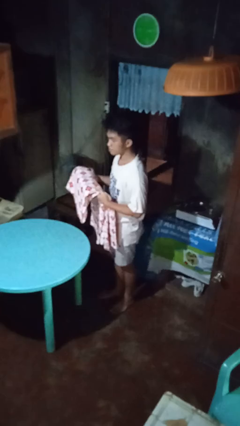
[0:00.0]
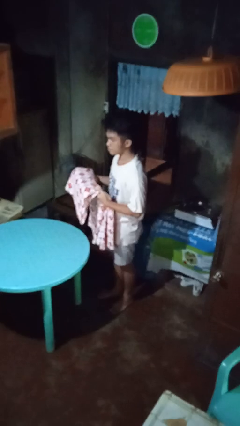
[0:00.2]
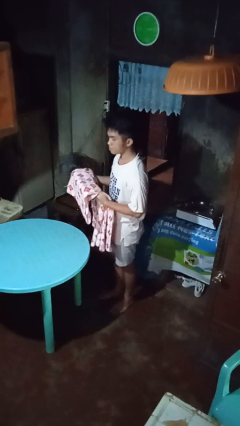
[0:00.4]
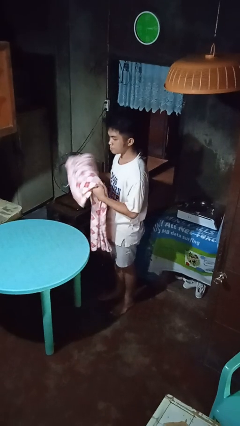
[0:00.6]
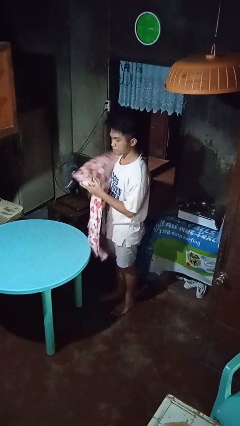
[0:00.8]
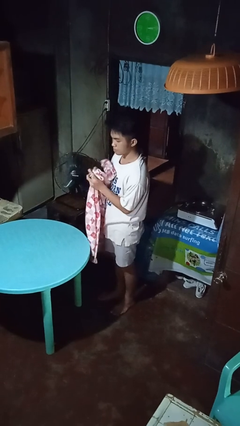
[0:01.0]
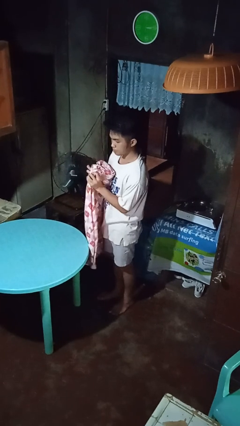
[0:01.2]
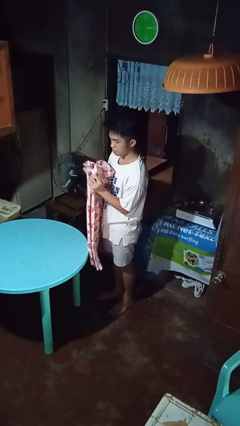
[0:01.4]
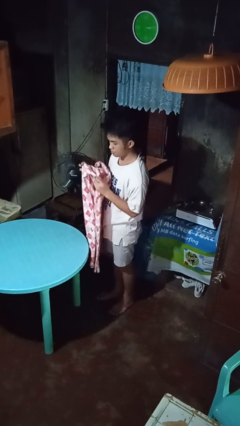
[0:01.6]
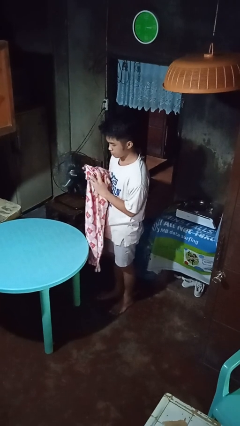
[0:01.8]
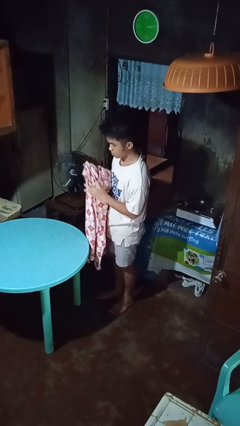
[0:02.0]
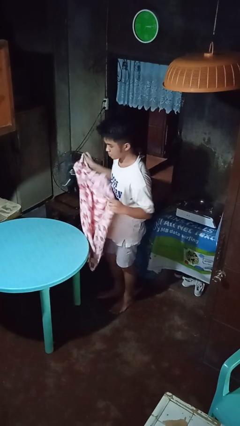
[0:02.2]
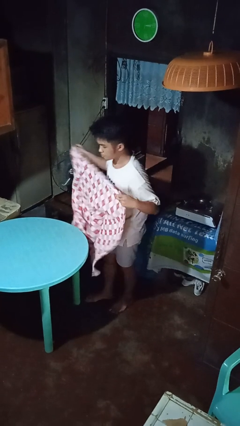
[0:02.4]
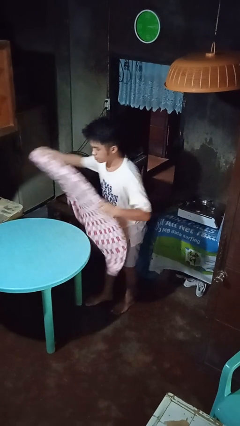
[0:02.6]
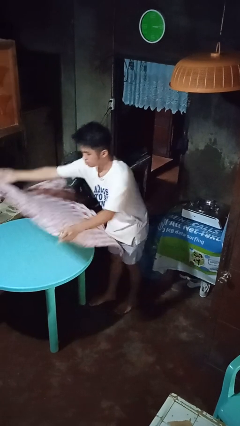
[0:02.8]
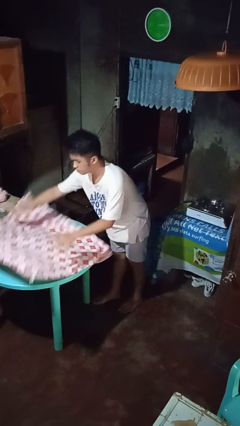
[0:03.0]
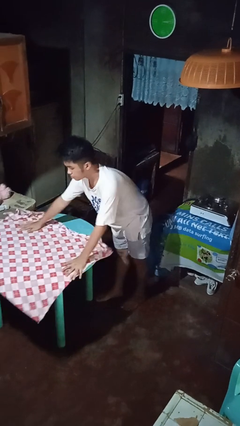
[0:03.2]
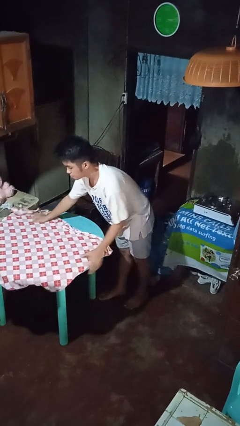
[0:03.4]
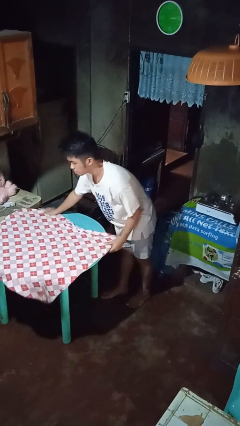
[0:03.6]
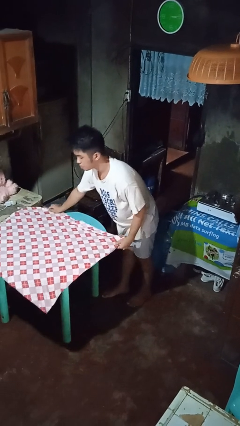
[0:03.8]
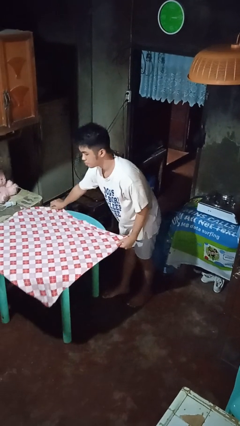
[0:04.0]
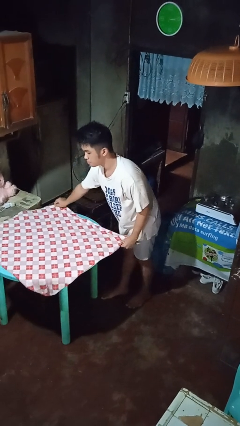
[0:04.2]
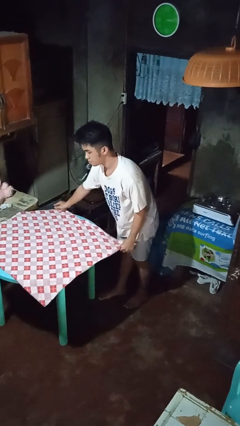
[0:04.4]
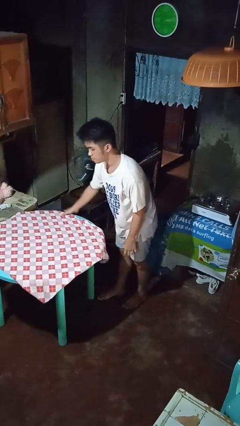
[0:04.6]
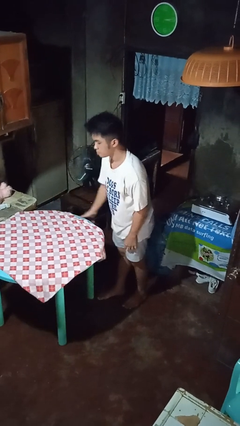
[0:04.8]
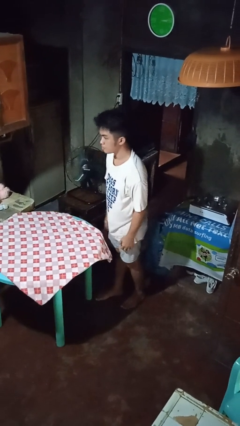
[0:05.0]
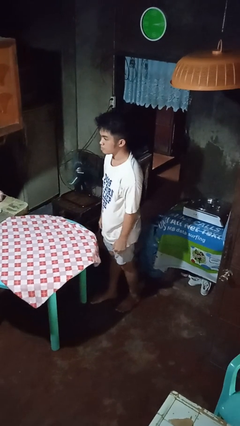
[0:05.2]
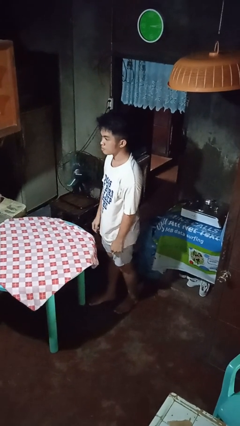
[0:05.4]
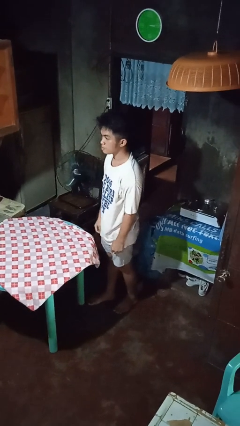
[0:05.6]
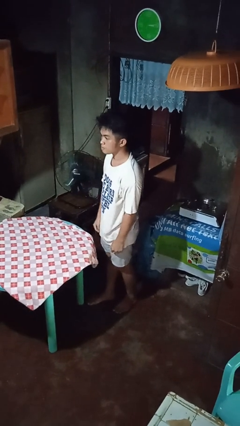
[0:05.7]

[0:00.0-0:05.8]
person spreads tablecloth

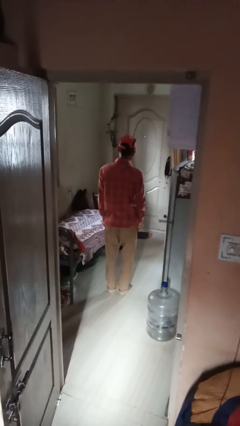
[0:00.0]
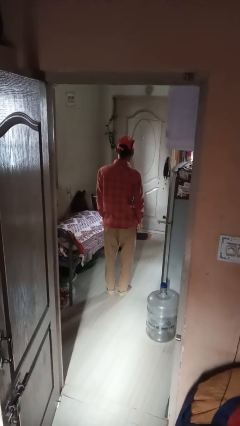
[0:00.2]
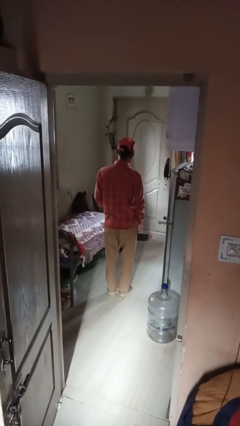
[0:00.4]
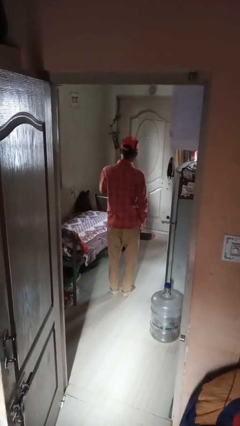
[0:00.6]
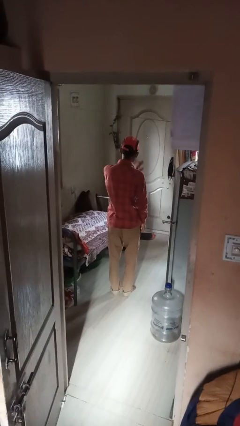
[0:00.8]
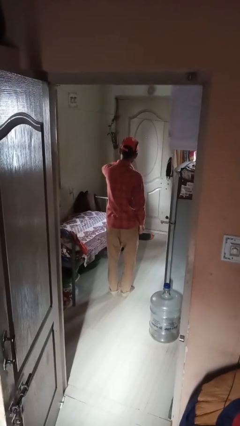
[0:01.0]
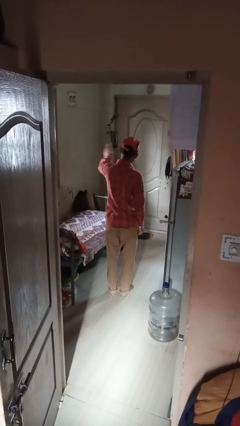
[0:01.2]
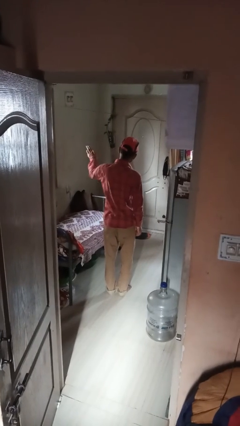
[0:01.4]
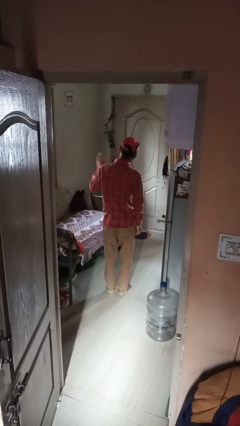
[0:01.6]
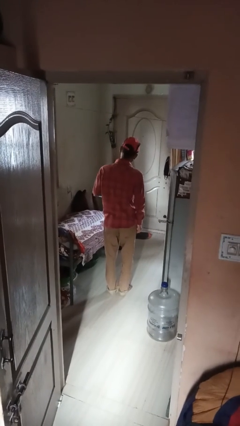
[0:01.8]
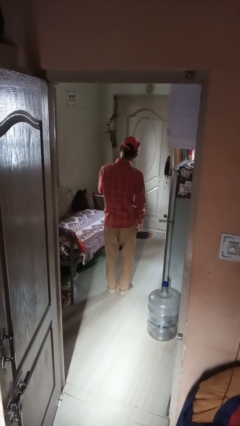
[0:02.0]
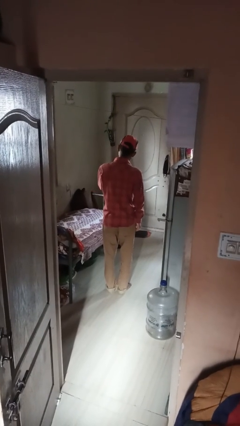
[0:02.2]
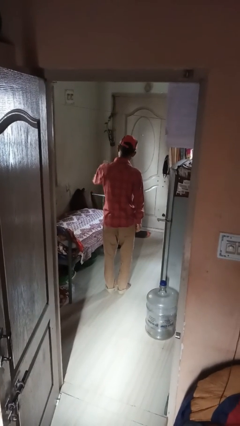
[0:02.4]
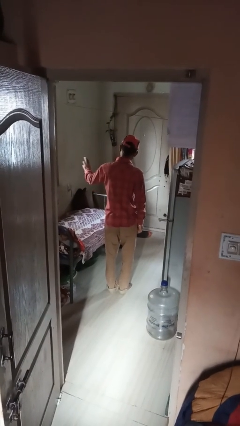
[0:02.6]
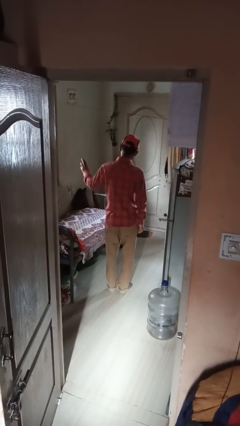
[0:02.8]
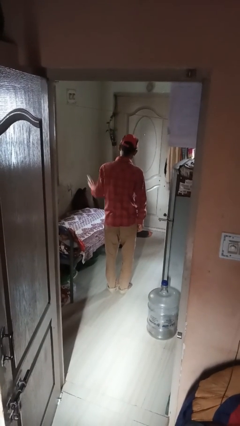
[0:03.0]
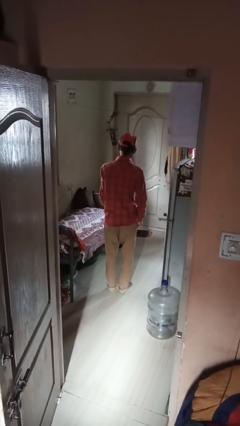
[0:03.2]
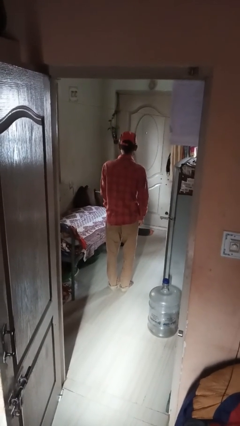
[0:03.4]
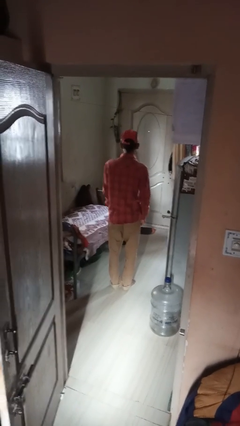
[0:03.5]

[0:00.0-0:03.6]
person gestures swipe left

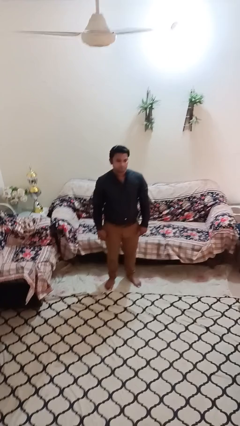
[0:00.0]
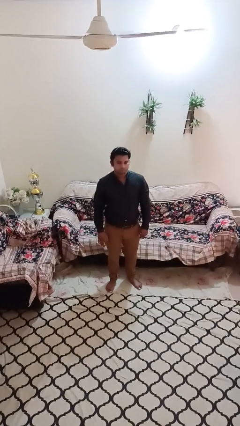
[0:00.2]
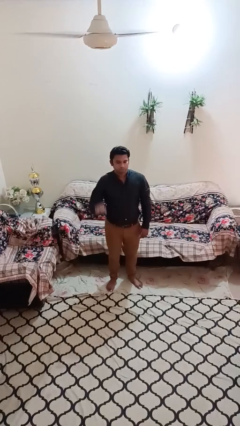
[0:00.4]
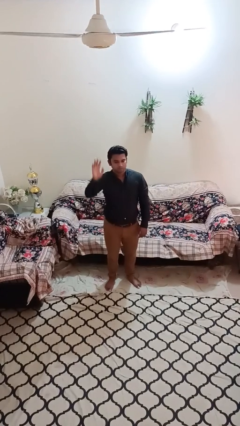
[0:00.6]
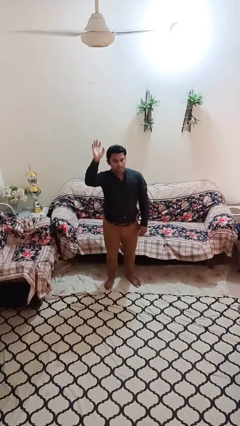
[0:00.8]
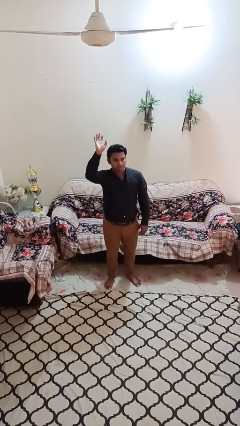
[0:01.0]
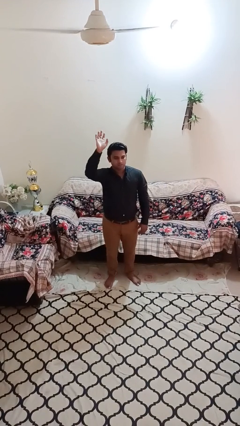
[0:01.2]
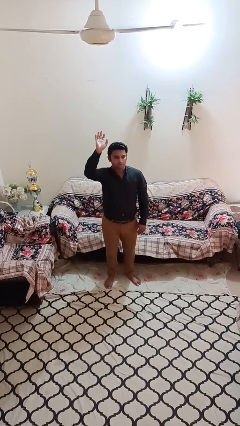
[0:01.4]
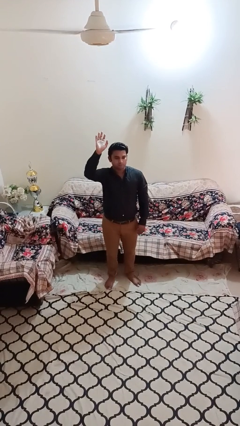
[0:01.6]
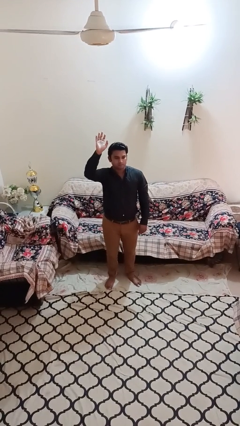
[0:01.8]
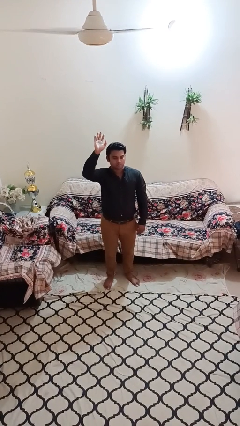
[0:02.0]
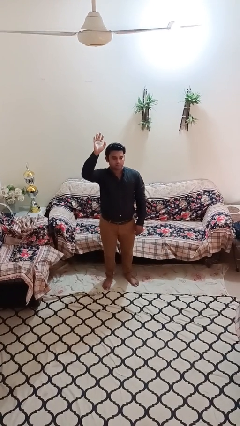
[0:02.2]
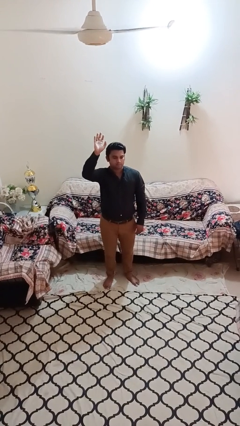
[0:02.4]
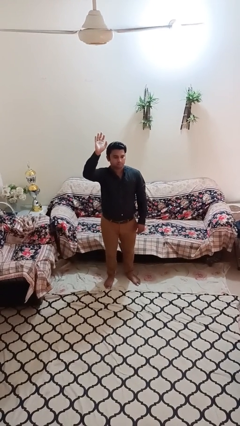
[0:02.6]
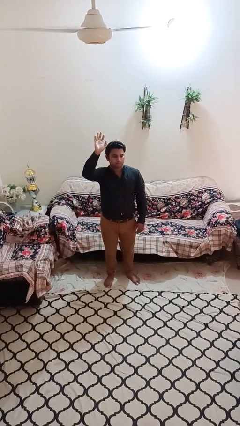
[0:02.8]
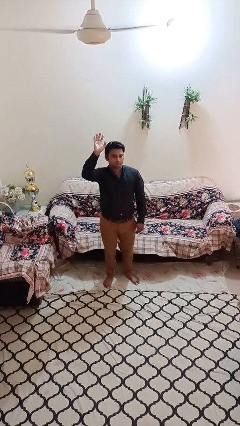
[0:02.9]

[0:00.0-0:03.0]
person gestures raise hand

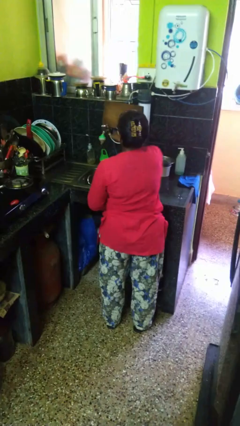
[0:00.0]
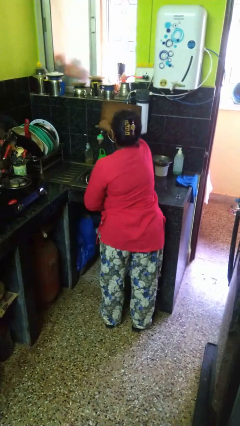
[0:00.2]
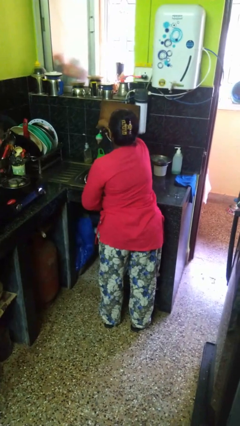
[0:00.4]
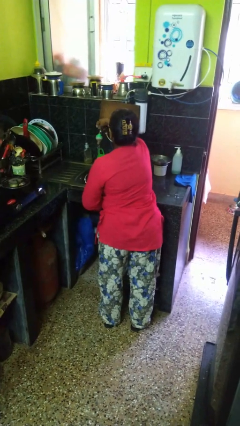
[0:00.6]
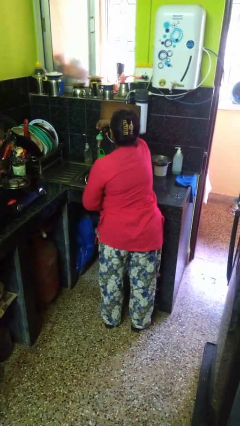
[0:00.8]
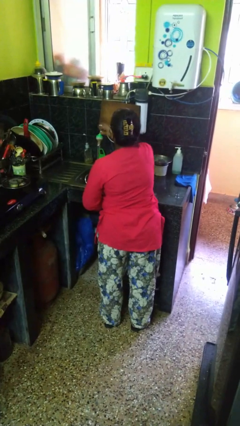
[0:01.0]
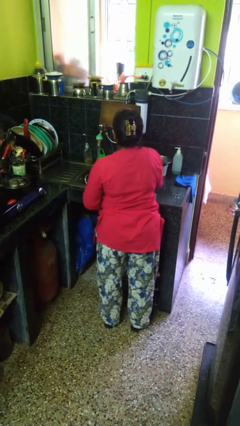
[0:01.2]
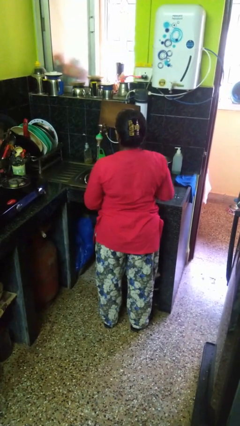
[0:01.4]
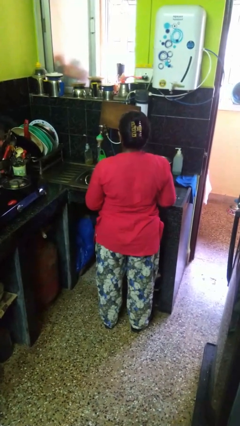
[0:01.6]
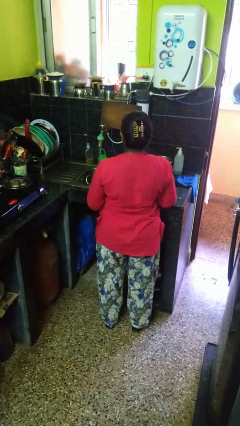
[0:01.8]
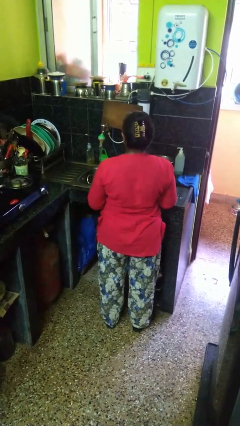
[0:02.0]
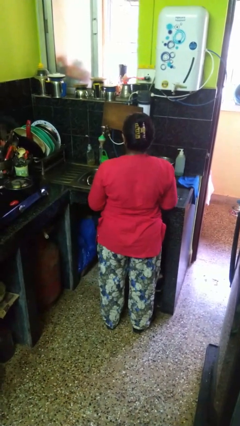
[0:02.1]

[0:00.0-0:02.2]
person turns on faucet

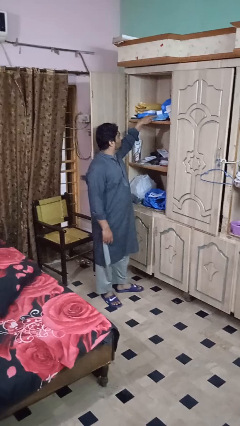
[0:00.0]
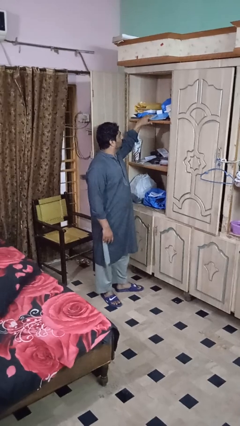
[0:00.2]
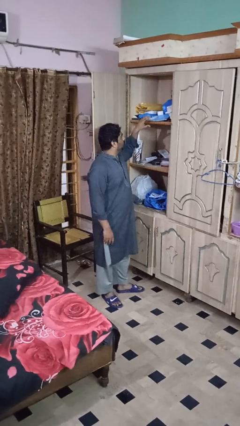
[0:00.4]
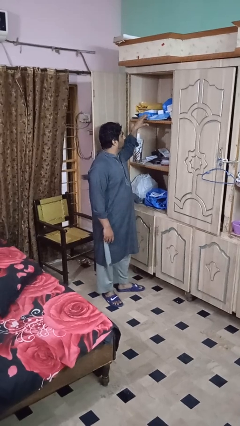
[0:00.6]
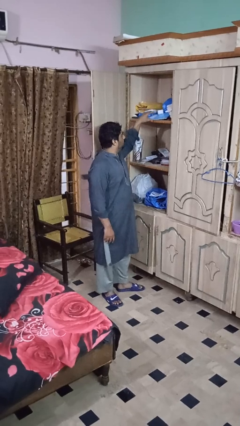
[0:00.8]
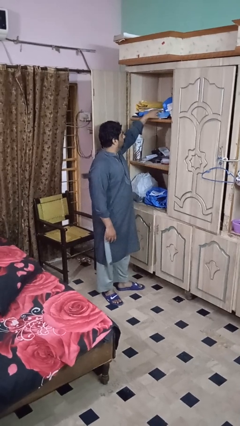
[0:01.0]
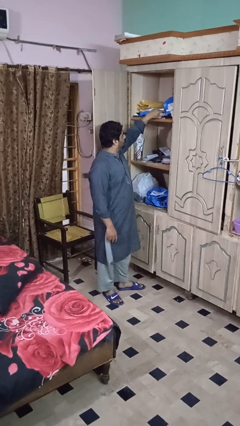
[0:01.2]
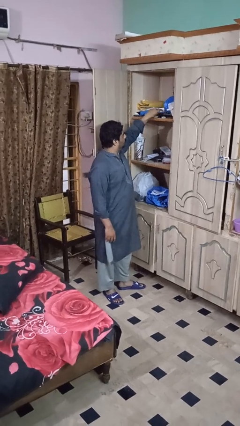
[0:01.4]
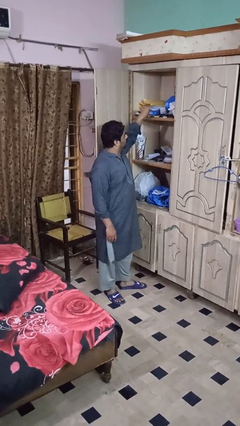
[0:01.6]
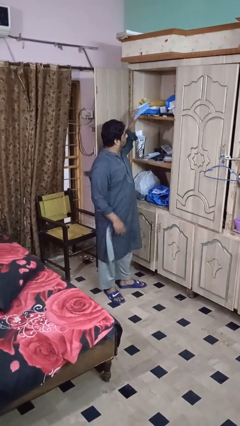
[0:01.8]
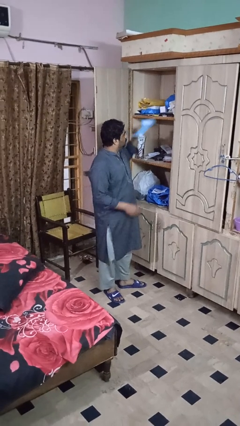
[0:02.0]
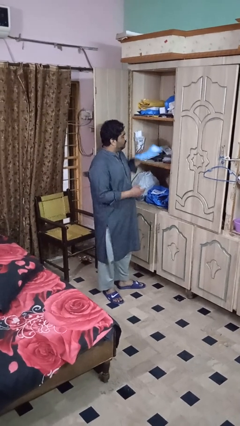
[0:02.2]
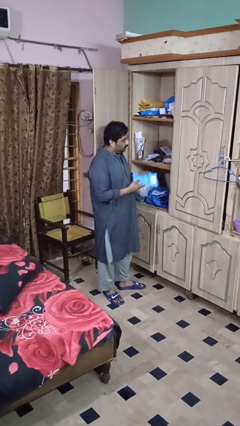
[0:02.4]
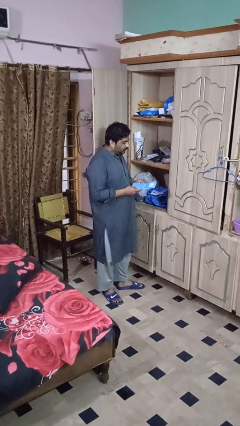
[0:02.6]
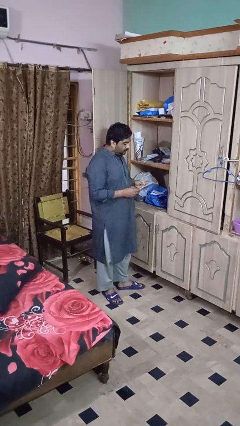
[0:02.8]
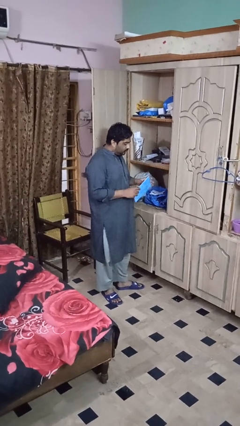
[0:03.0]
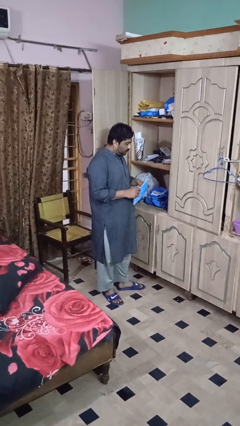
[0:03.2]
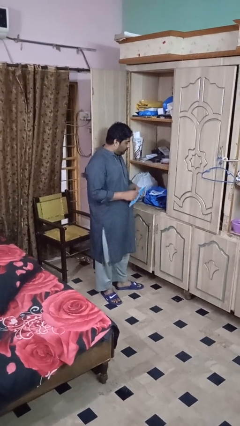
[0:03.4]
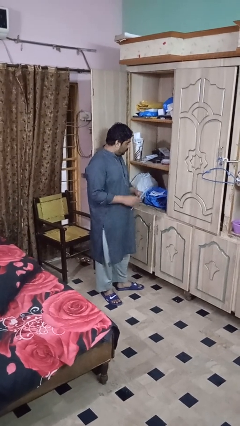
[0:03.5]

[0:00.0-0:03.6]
person picks up object from shelf
